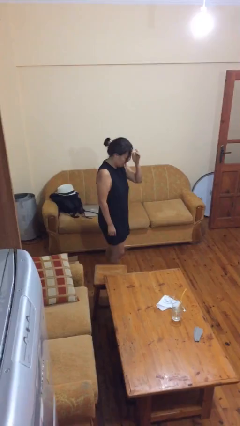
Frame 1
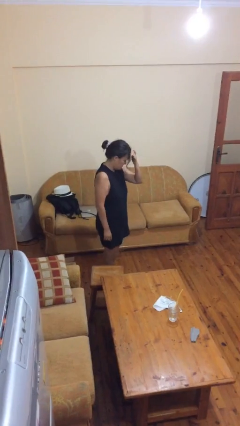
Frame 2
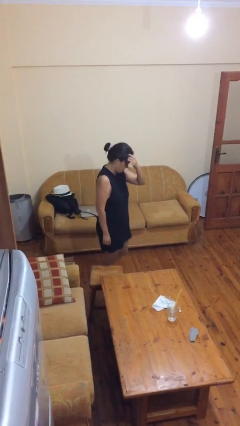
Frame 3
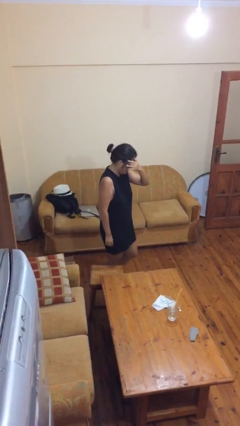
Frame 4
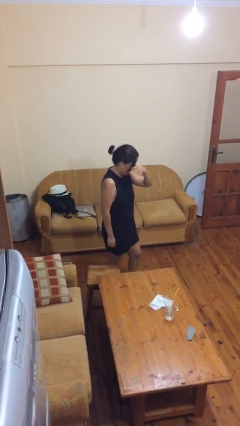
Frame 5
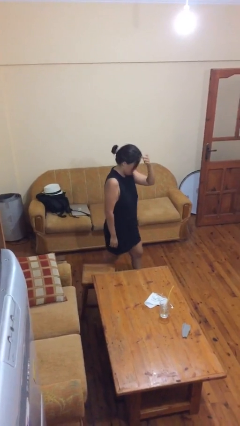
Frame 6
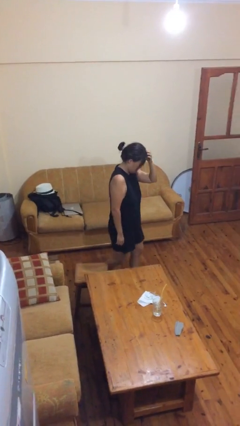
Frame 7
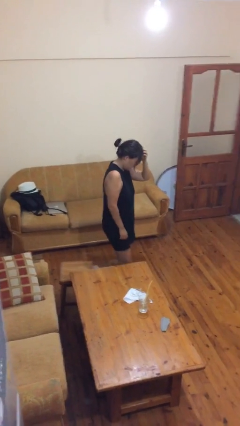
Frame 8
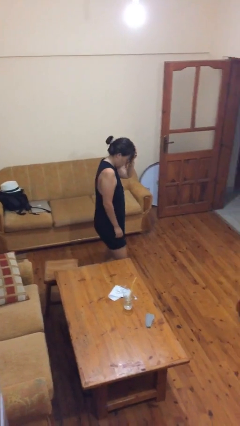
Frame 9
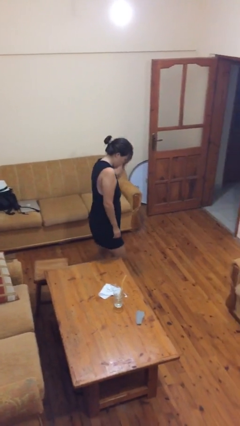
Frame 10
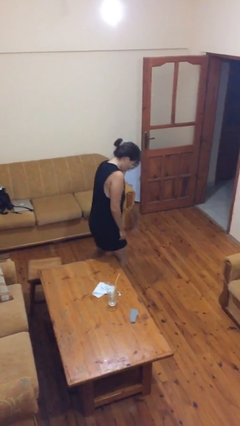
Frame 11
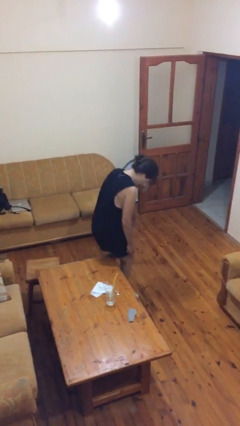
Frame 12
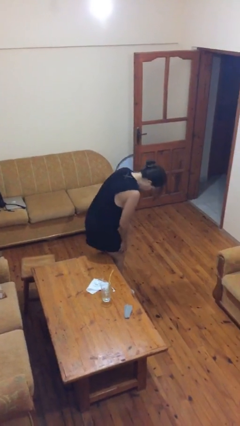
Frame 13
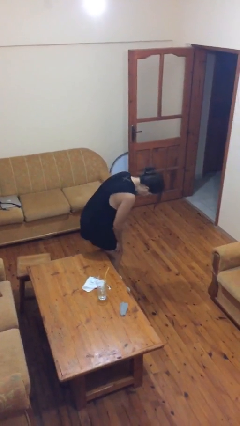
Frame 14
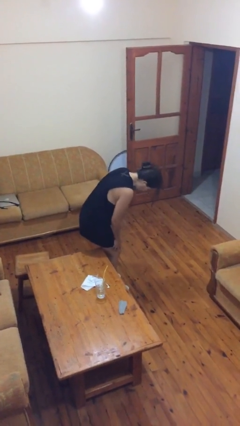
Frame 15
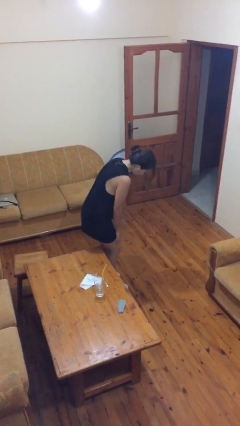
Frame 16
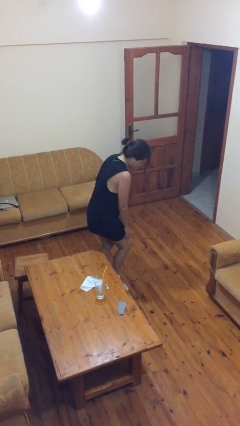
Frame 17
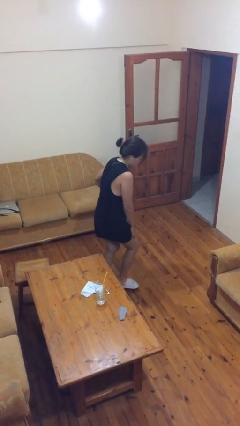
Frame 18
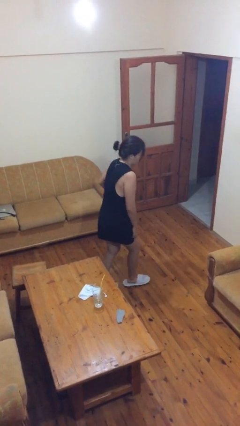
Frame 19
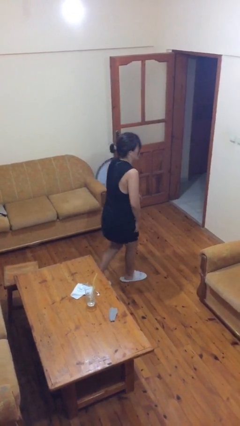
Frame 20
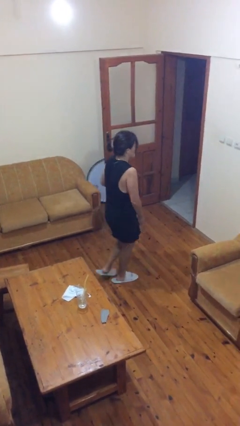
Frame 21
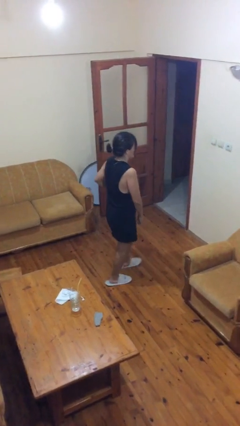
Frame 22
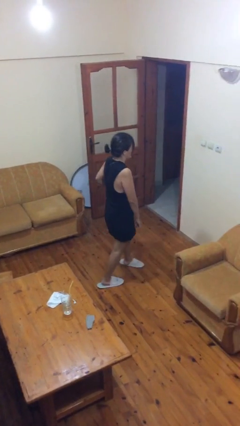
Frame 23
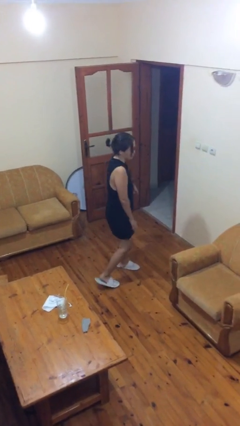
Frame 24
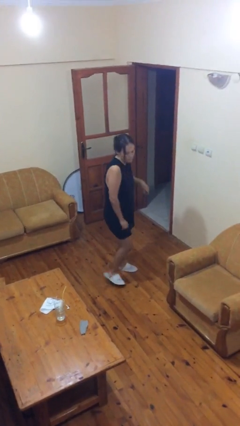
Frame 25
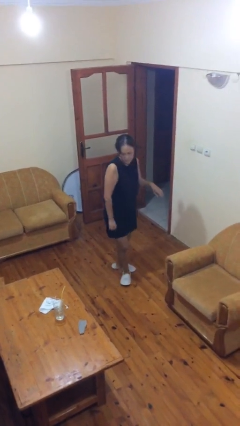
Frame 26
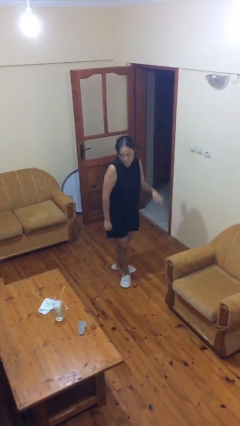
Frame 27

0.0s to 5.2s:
person bumps into table

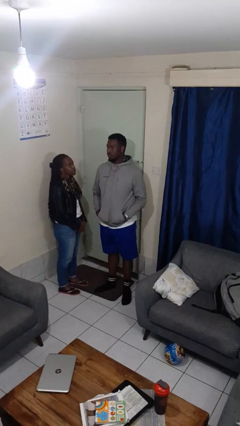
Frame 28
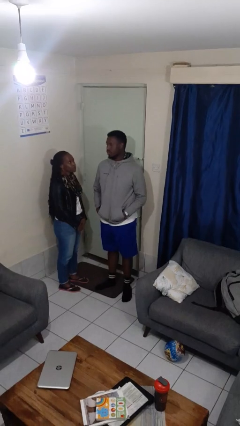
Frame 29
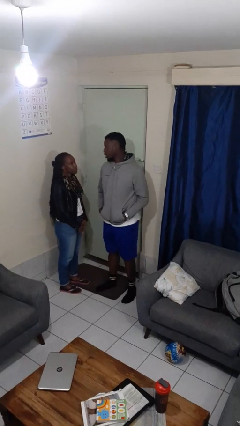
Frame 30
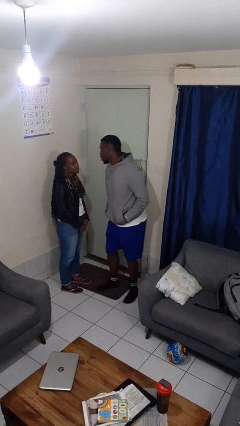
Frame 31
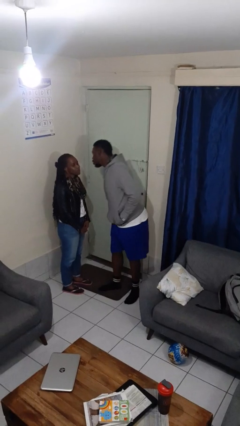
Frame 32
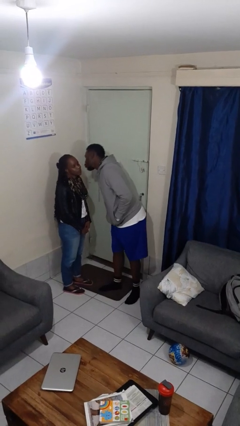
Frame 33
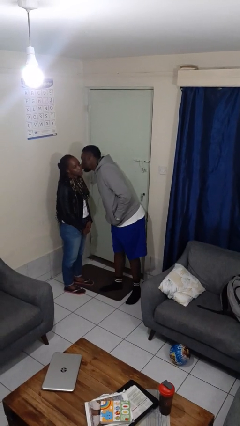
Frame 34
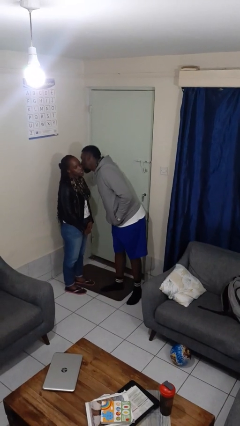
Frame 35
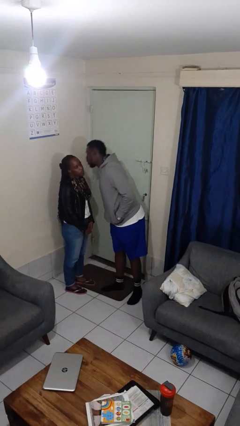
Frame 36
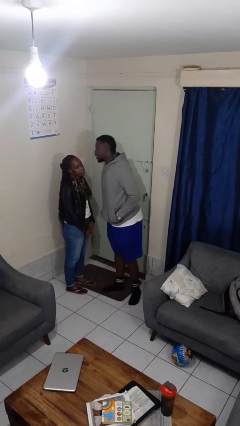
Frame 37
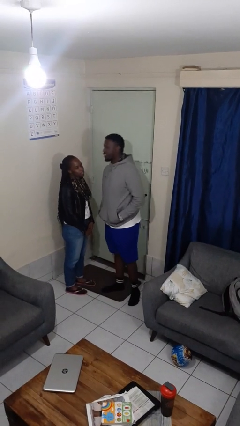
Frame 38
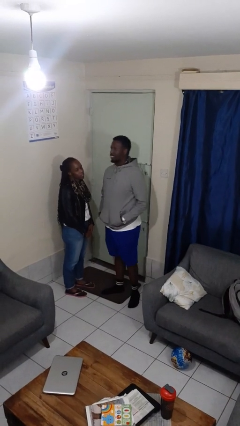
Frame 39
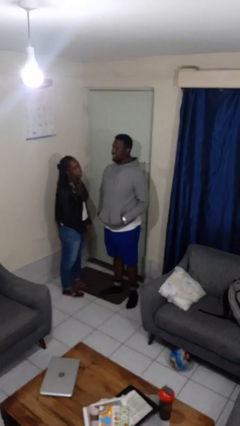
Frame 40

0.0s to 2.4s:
person kisses cheek of person

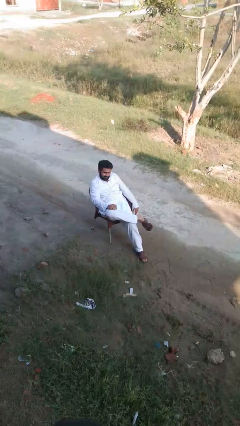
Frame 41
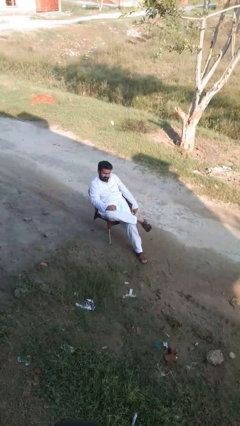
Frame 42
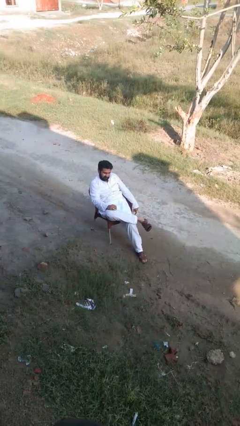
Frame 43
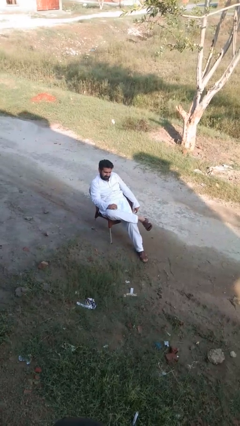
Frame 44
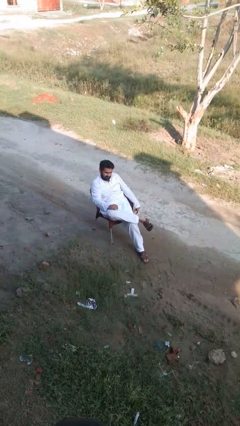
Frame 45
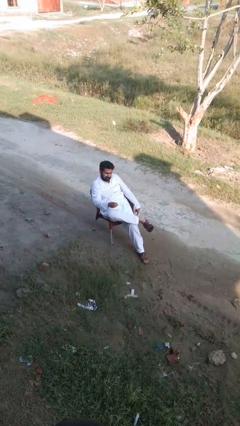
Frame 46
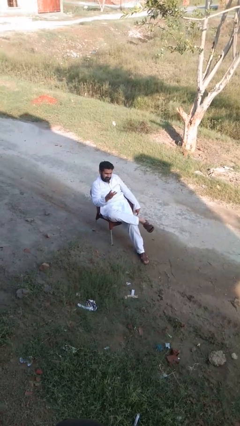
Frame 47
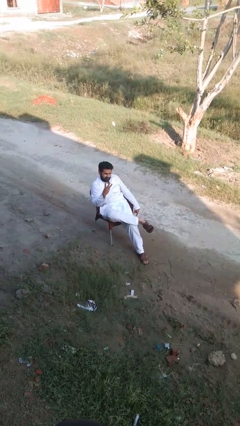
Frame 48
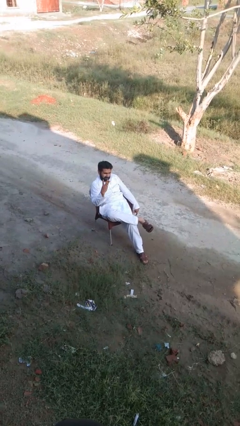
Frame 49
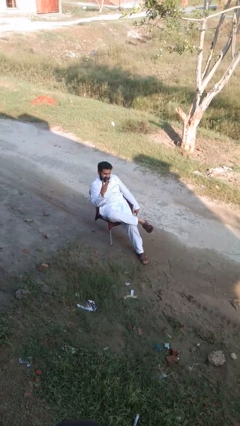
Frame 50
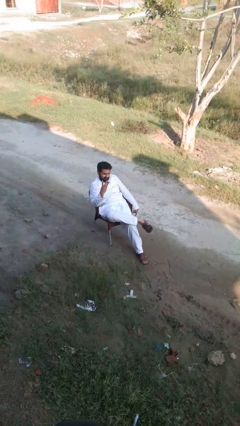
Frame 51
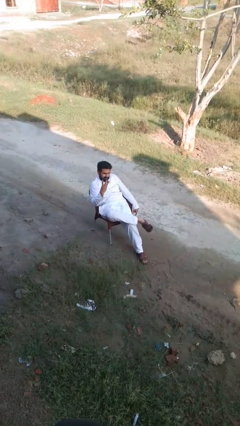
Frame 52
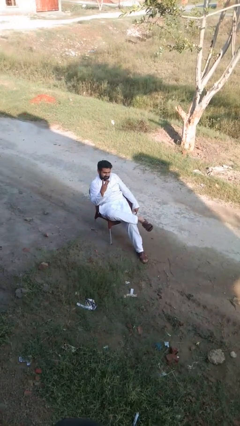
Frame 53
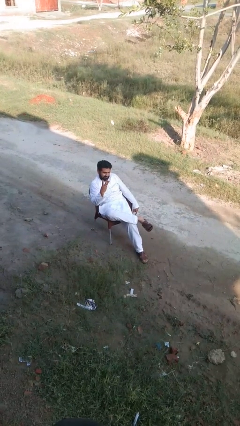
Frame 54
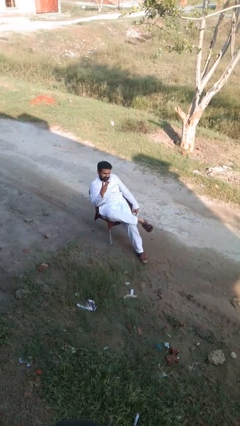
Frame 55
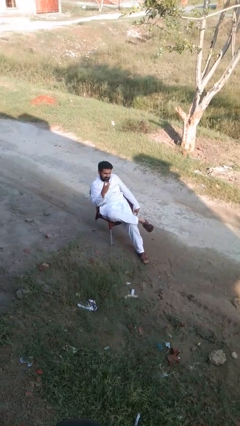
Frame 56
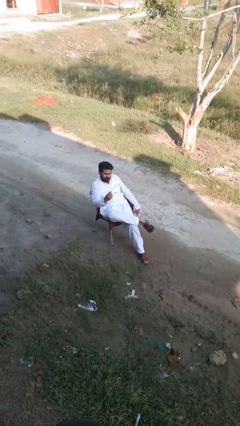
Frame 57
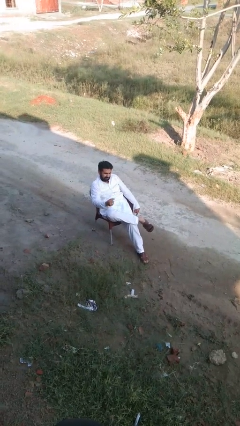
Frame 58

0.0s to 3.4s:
person gestures number three

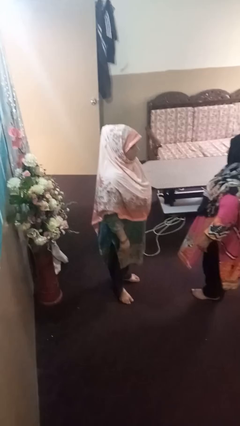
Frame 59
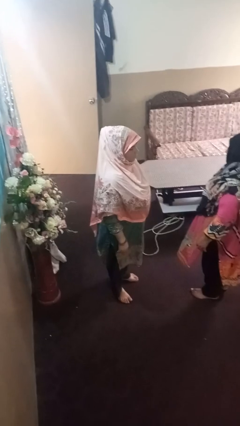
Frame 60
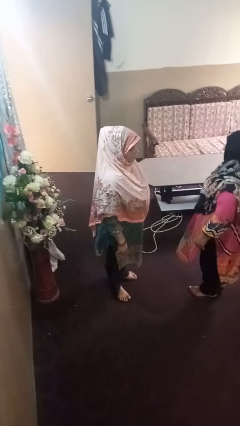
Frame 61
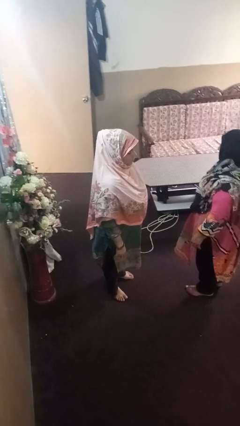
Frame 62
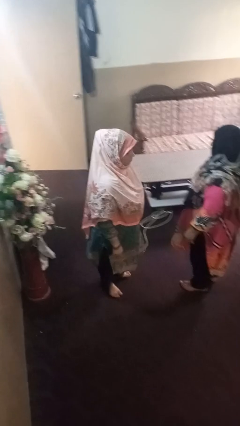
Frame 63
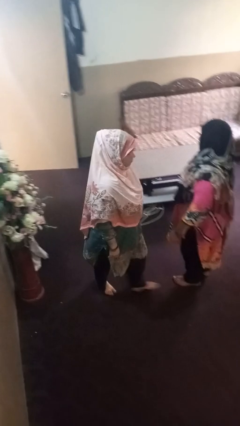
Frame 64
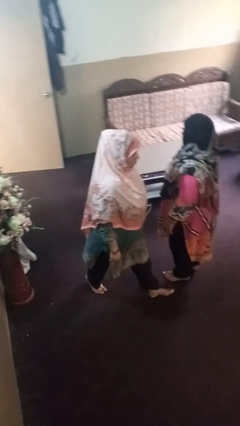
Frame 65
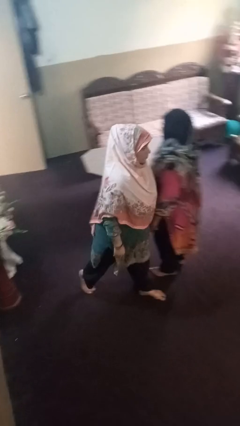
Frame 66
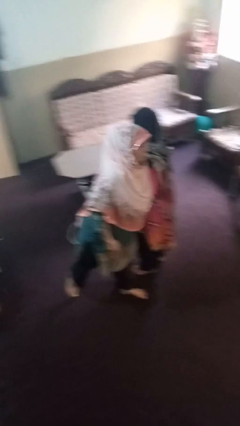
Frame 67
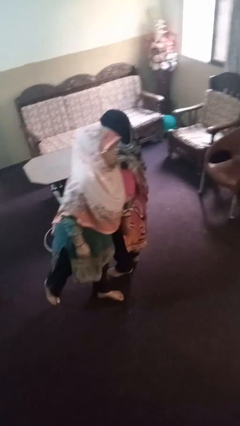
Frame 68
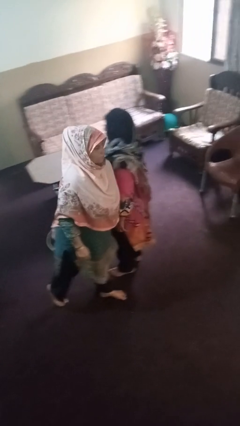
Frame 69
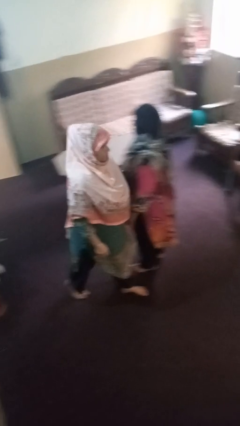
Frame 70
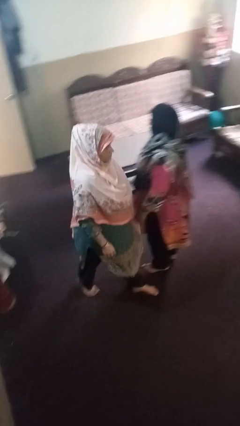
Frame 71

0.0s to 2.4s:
person shoves person

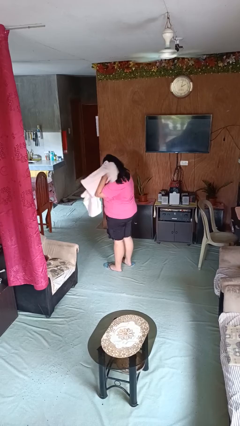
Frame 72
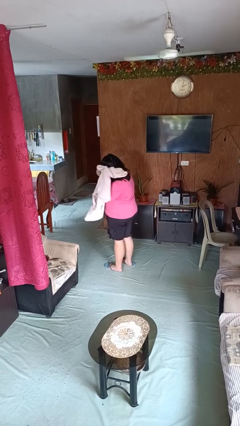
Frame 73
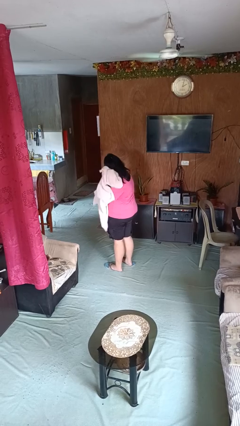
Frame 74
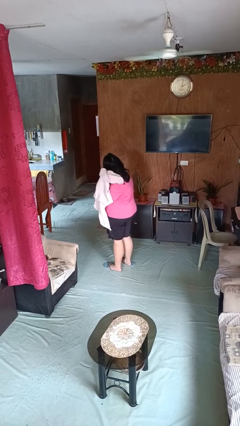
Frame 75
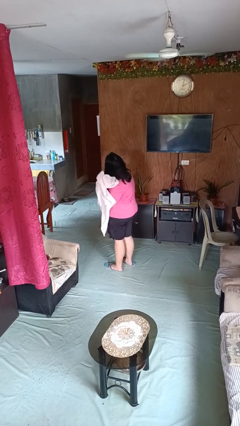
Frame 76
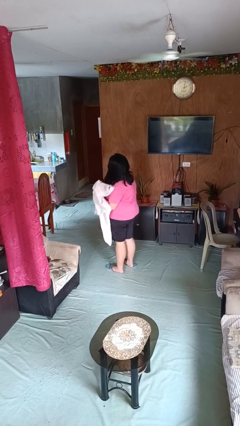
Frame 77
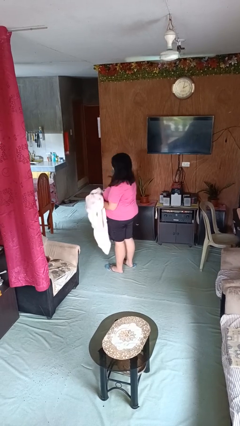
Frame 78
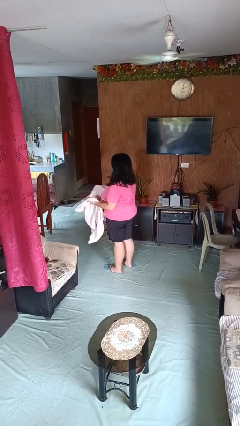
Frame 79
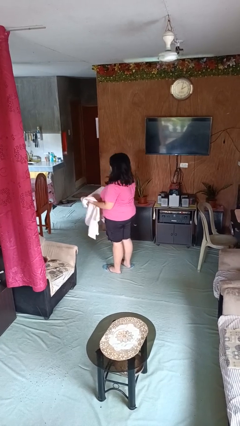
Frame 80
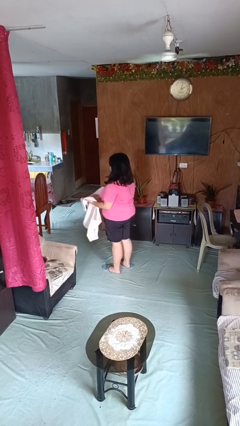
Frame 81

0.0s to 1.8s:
person dries hair with towel

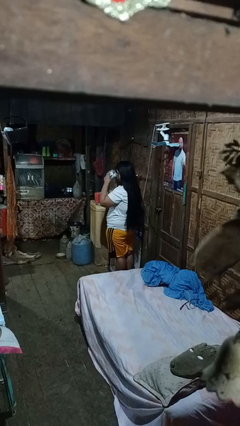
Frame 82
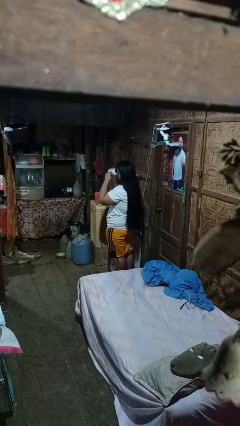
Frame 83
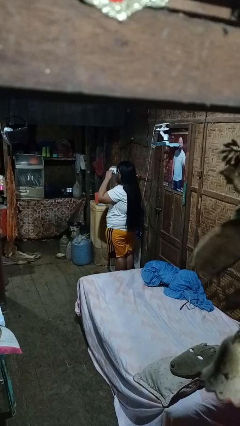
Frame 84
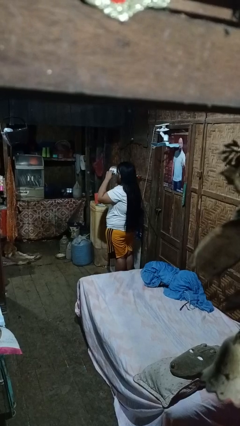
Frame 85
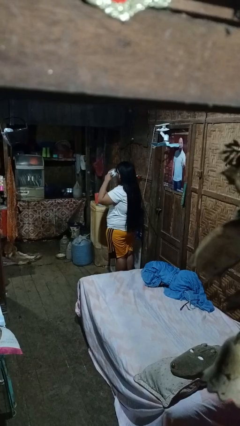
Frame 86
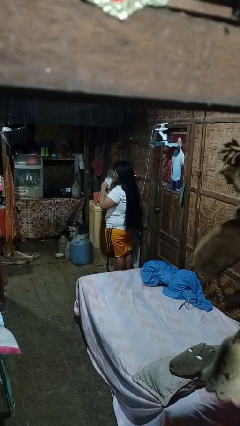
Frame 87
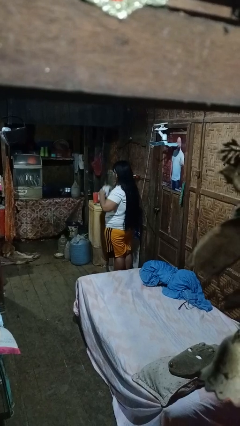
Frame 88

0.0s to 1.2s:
person drinks from mug

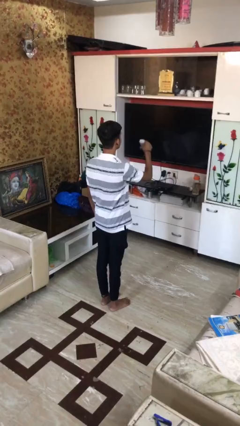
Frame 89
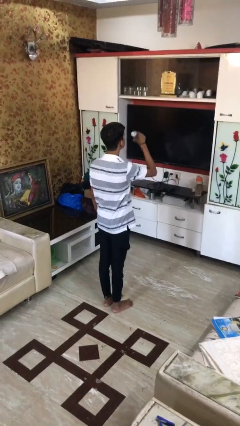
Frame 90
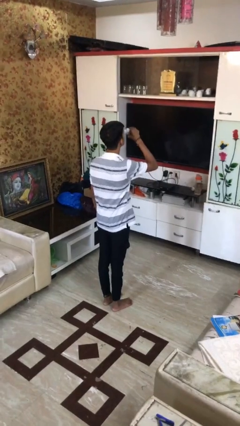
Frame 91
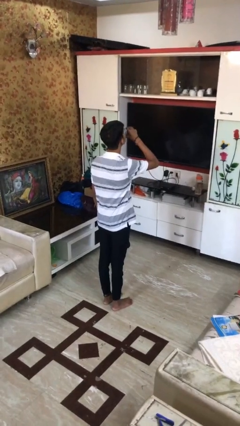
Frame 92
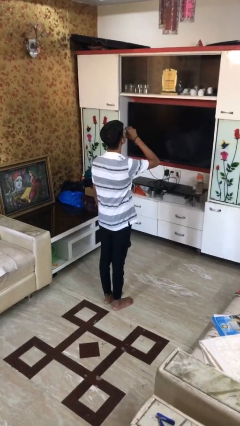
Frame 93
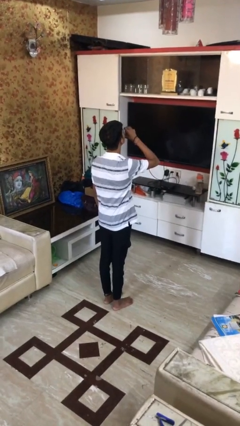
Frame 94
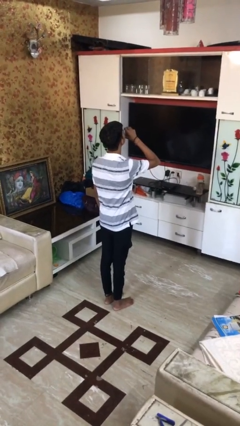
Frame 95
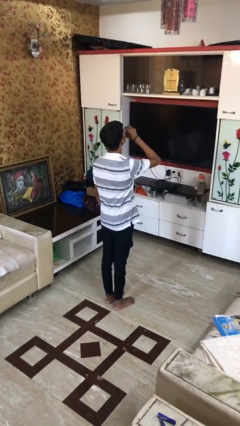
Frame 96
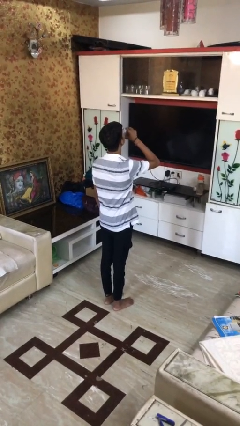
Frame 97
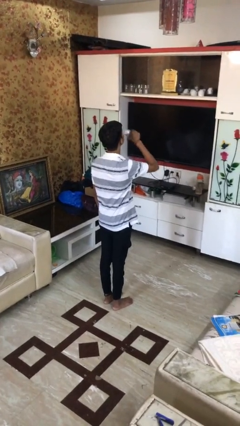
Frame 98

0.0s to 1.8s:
person drinks from beverage can
